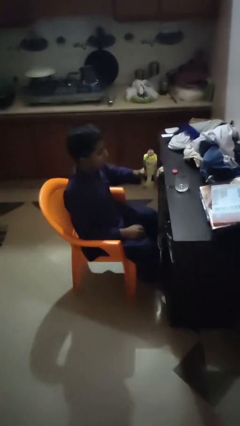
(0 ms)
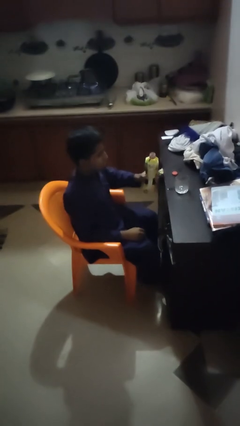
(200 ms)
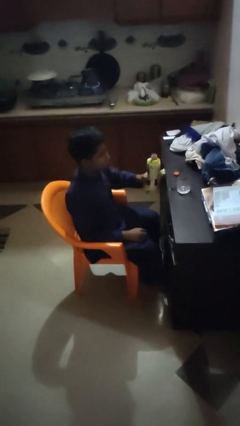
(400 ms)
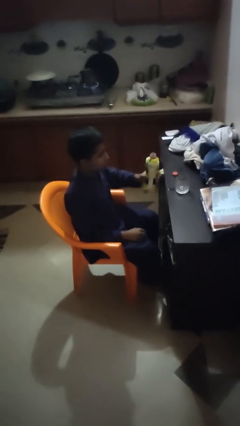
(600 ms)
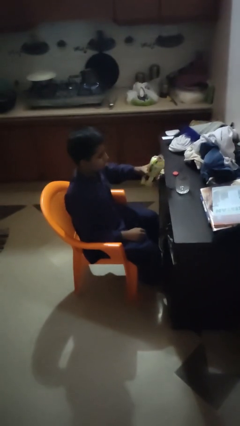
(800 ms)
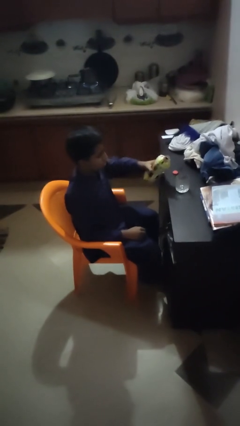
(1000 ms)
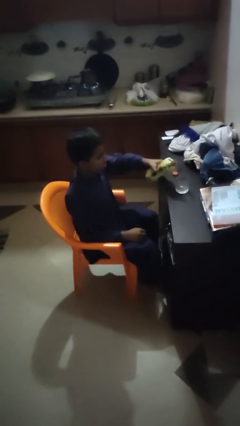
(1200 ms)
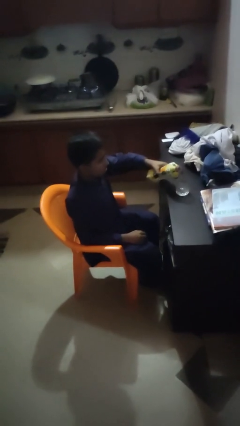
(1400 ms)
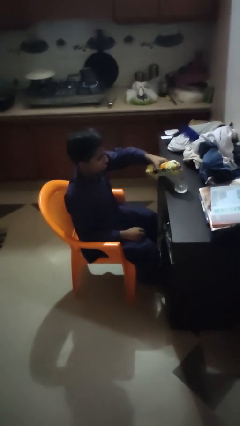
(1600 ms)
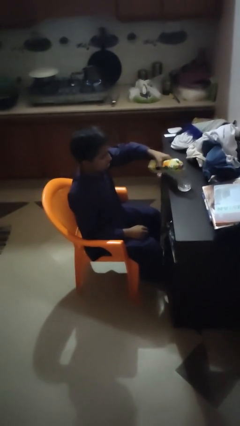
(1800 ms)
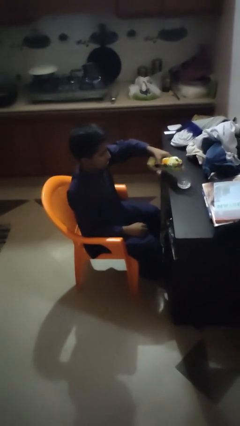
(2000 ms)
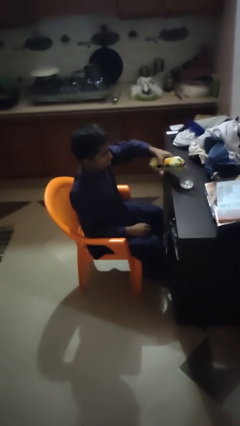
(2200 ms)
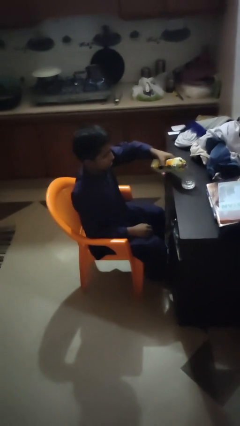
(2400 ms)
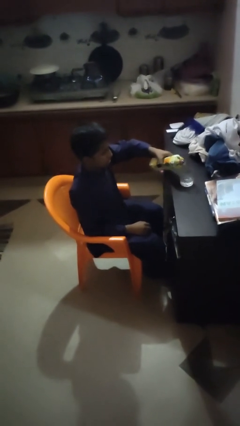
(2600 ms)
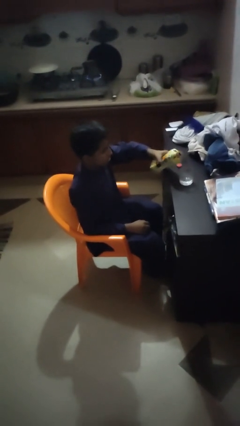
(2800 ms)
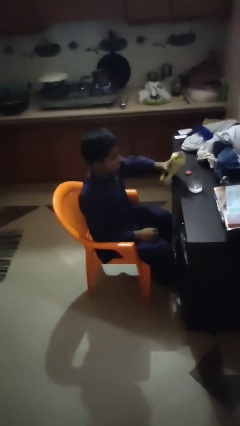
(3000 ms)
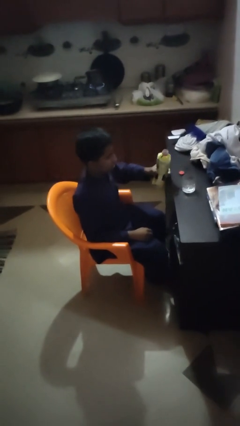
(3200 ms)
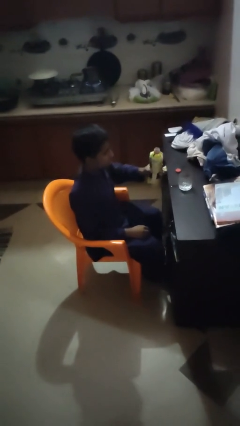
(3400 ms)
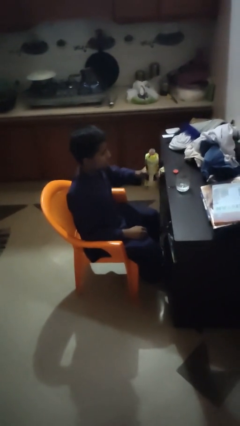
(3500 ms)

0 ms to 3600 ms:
person pours liquid into cup

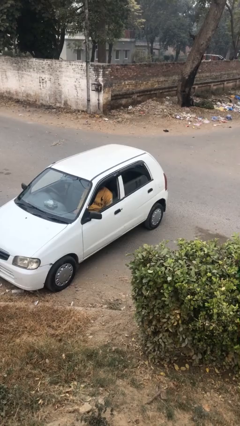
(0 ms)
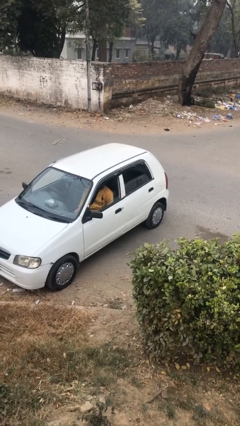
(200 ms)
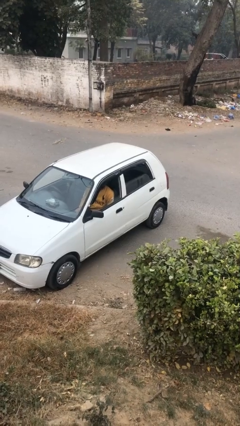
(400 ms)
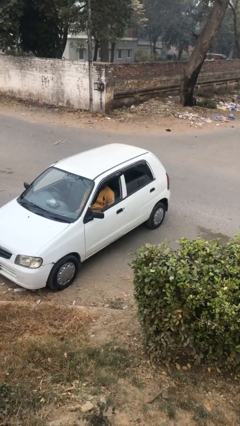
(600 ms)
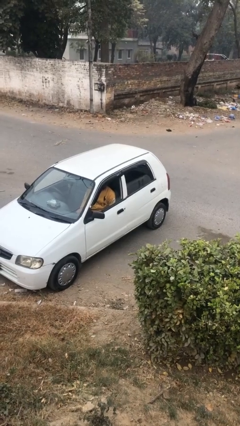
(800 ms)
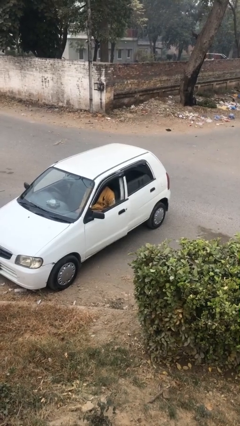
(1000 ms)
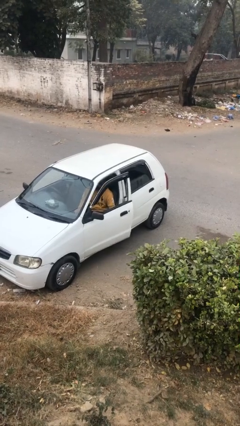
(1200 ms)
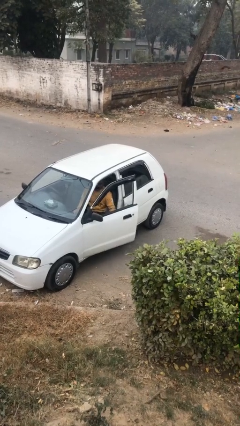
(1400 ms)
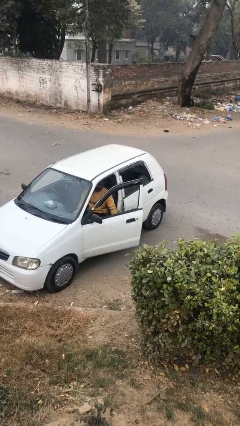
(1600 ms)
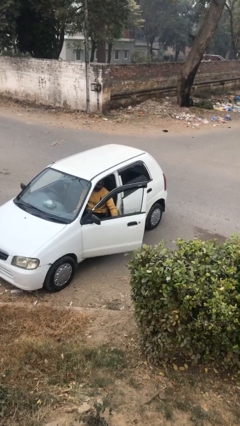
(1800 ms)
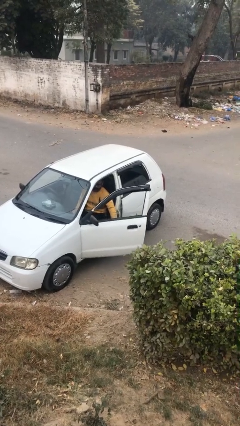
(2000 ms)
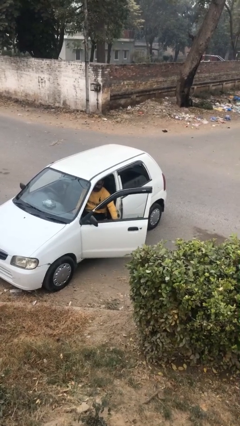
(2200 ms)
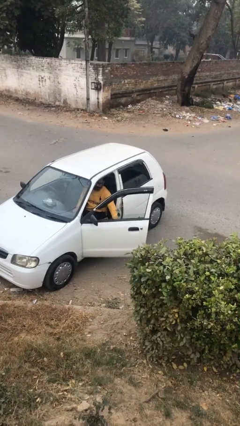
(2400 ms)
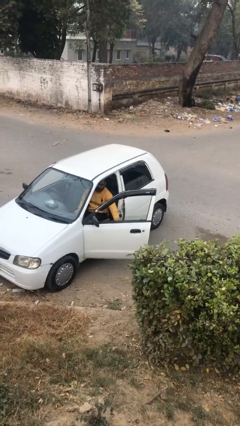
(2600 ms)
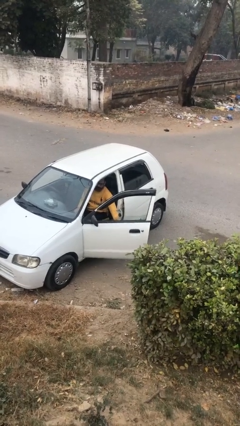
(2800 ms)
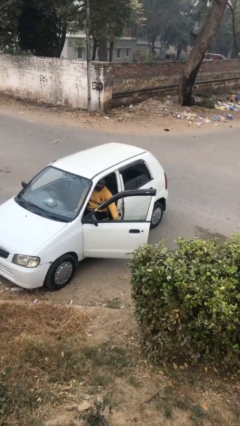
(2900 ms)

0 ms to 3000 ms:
person opens car door

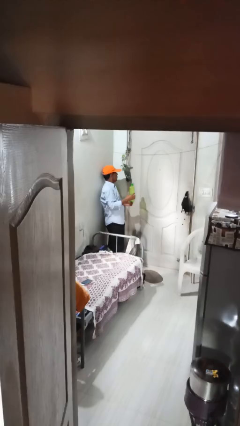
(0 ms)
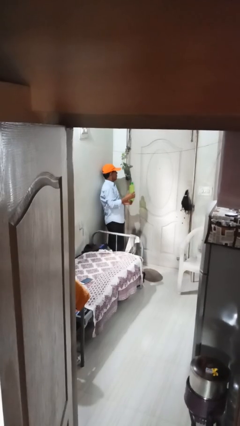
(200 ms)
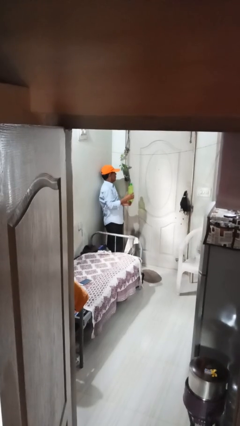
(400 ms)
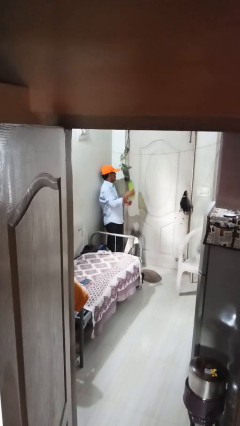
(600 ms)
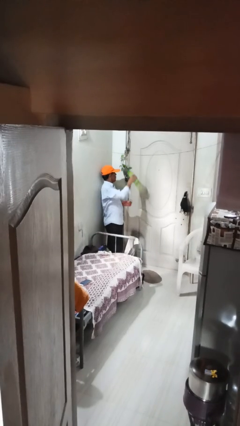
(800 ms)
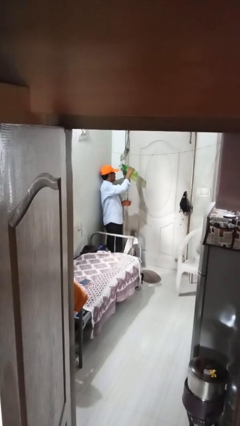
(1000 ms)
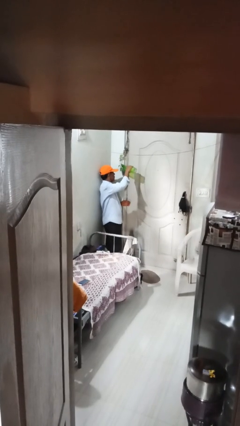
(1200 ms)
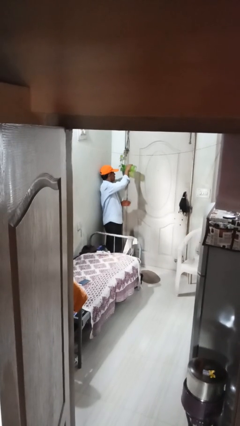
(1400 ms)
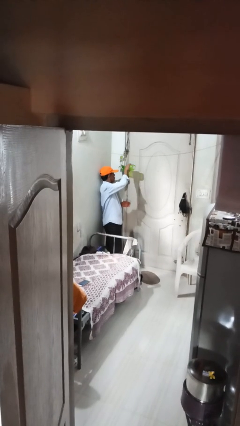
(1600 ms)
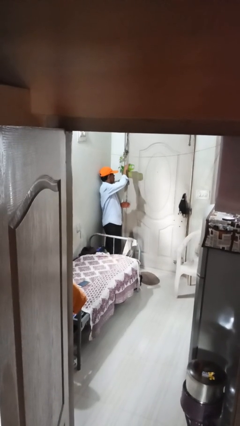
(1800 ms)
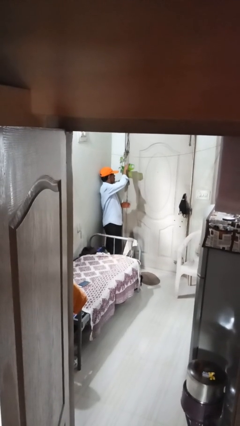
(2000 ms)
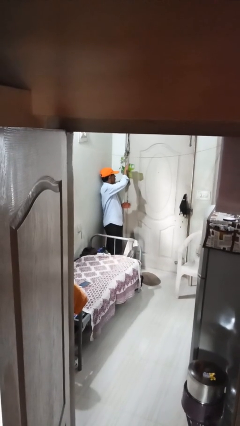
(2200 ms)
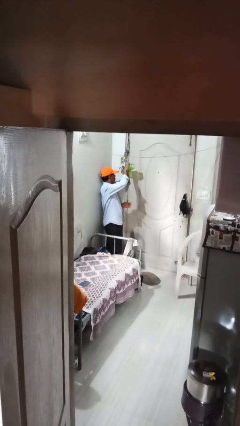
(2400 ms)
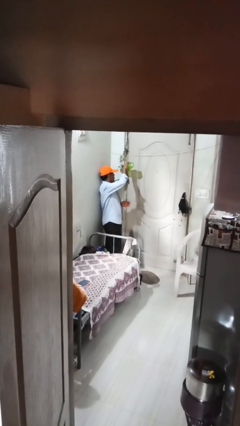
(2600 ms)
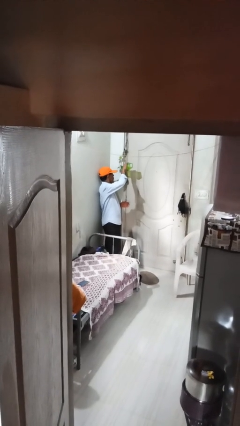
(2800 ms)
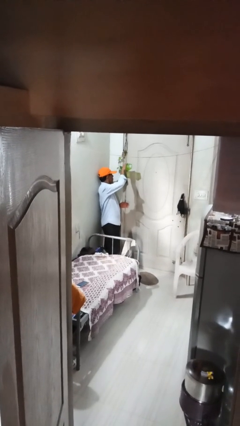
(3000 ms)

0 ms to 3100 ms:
person waters houseplant

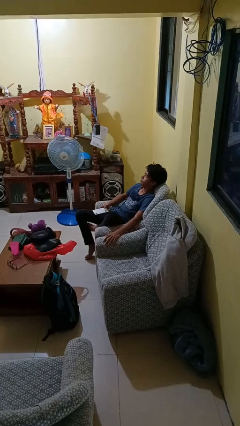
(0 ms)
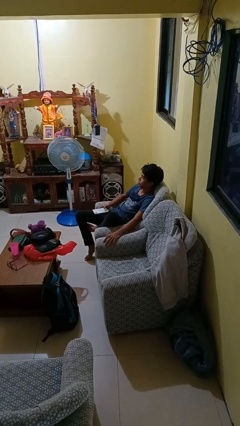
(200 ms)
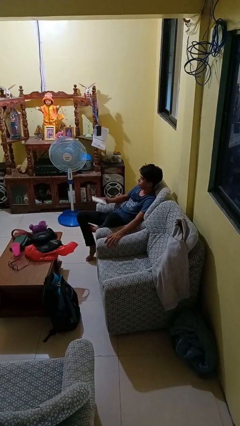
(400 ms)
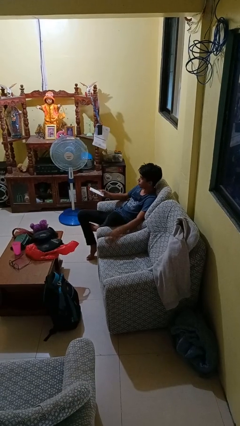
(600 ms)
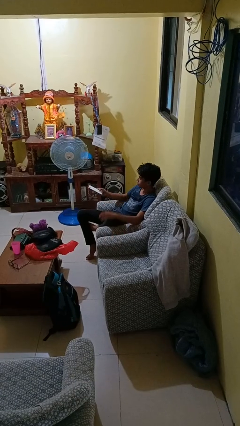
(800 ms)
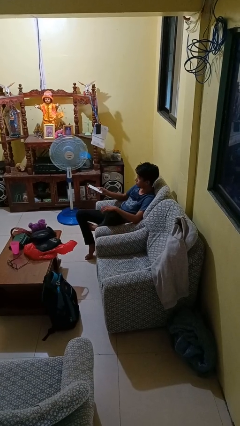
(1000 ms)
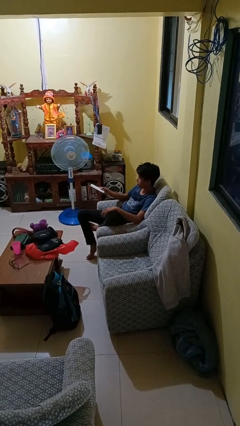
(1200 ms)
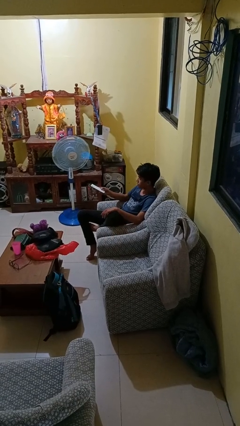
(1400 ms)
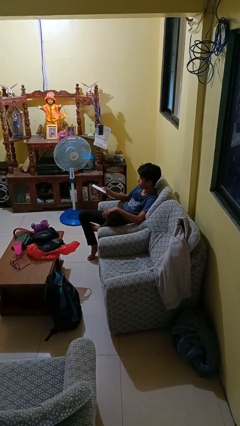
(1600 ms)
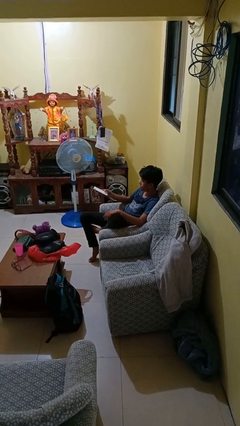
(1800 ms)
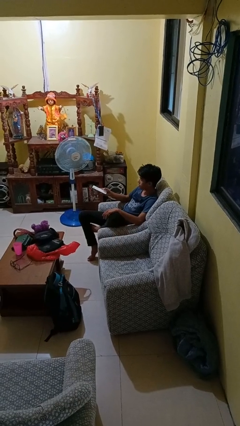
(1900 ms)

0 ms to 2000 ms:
person uses television remote

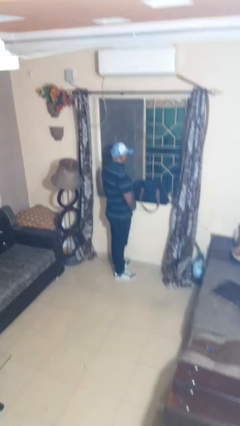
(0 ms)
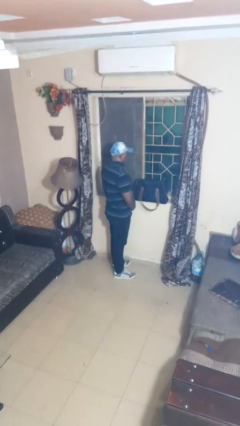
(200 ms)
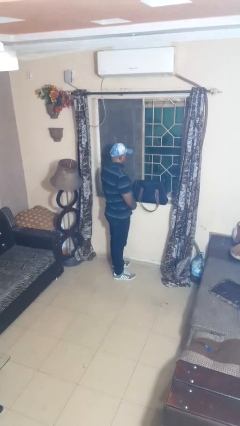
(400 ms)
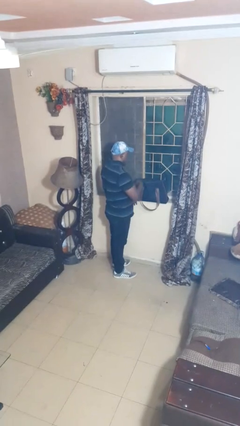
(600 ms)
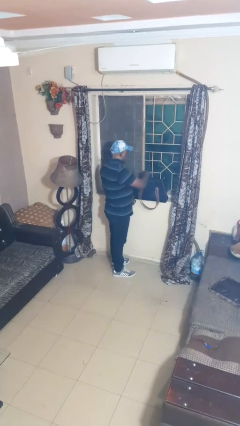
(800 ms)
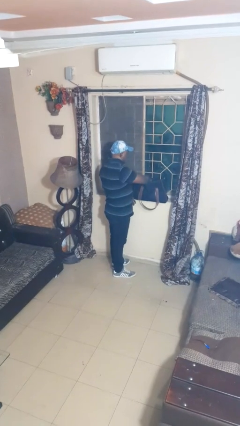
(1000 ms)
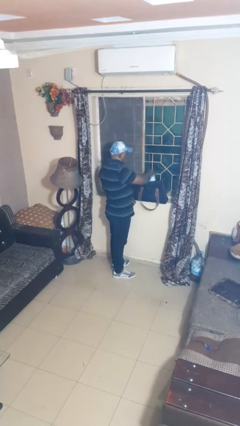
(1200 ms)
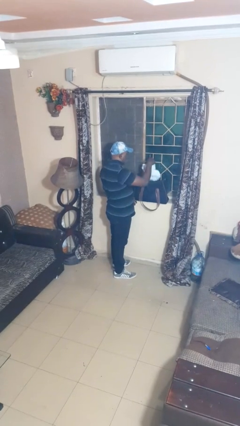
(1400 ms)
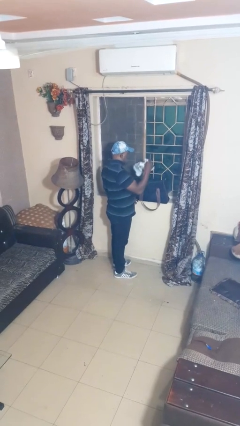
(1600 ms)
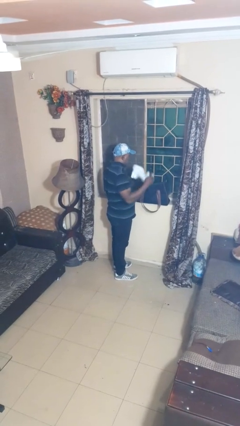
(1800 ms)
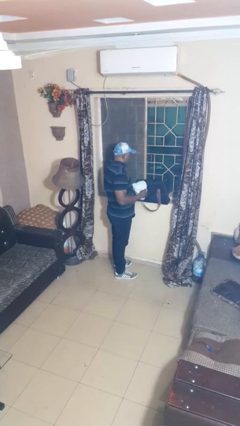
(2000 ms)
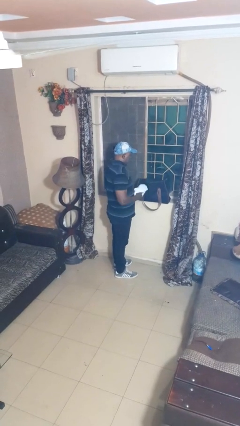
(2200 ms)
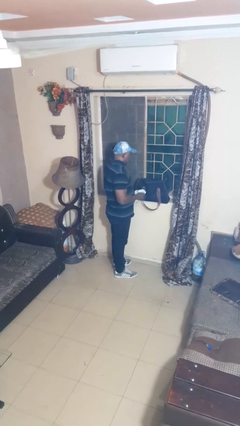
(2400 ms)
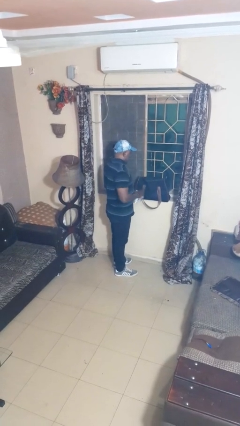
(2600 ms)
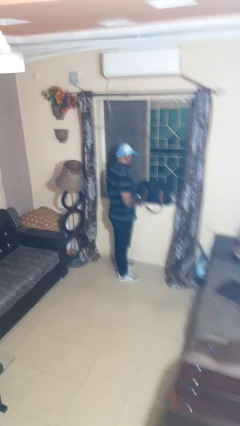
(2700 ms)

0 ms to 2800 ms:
person takes object from bag

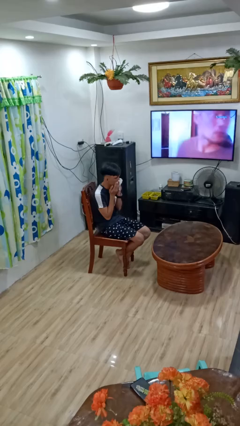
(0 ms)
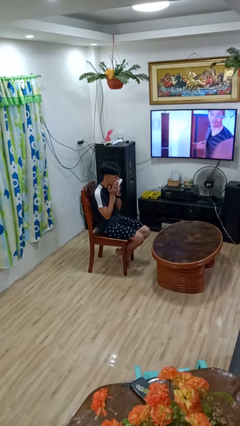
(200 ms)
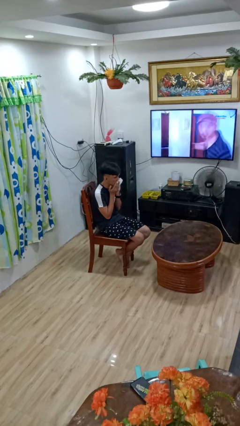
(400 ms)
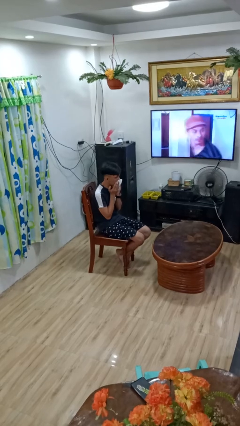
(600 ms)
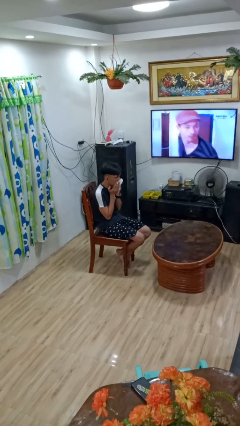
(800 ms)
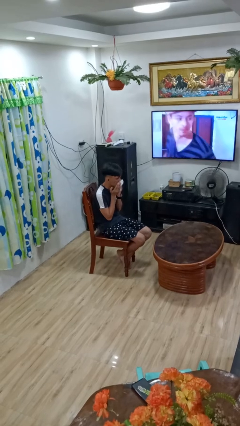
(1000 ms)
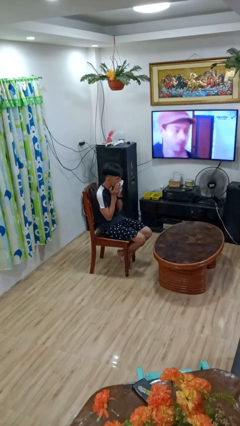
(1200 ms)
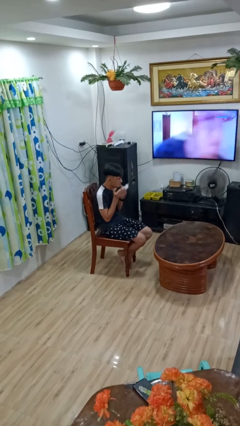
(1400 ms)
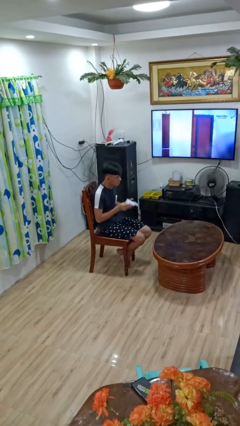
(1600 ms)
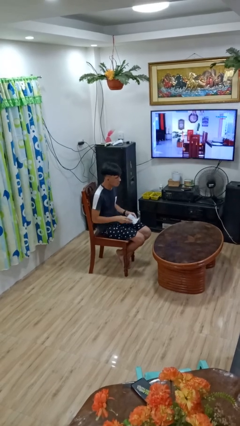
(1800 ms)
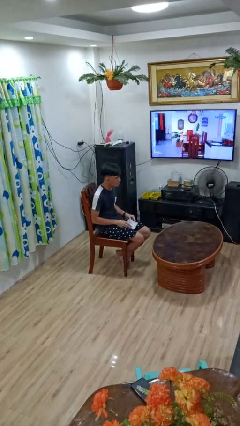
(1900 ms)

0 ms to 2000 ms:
person wipes mouth with napkin

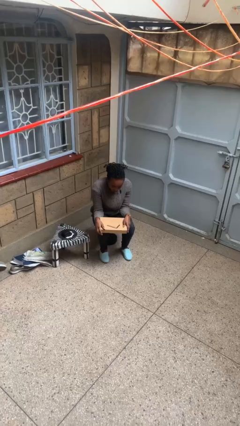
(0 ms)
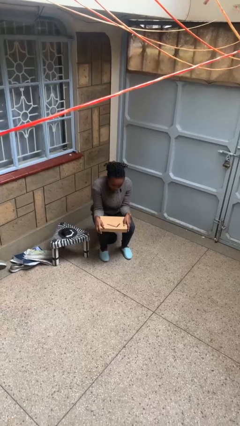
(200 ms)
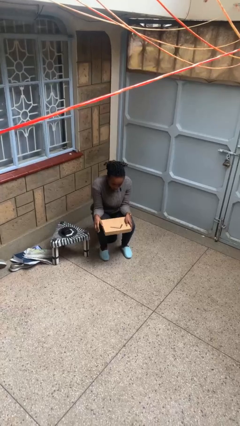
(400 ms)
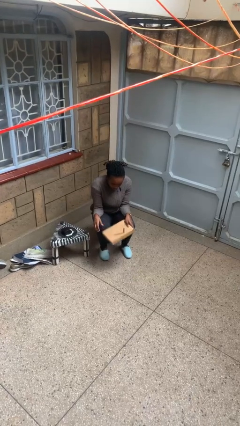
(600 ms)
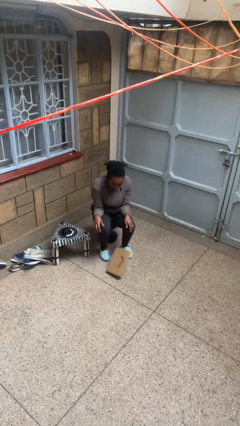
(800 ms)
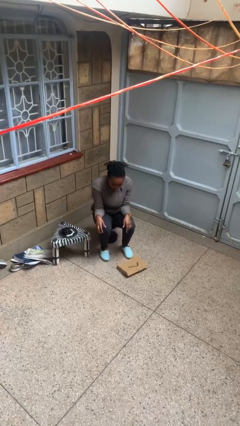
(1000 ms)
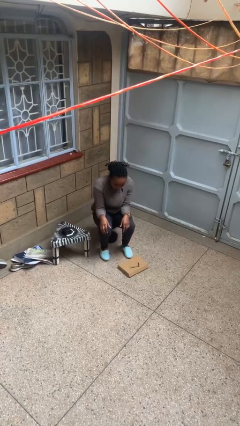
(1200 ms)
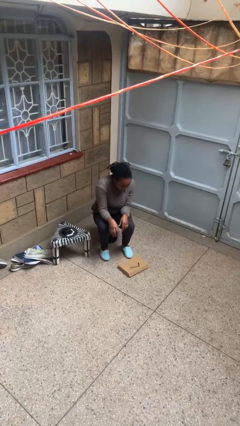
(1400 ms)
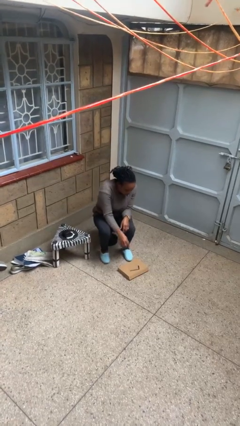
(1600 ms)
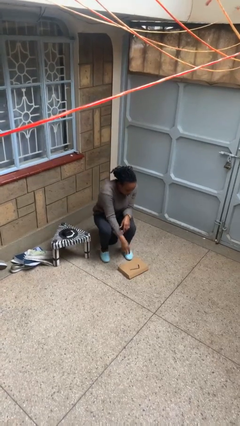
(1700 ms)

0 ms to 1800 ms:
person drops object
